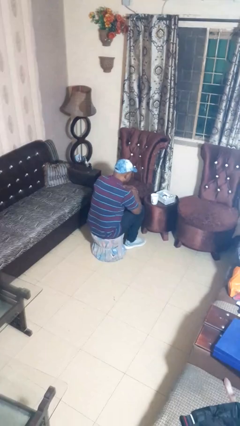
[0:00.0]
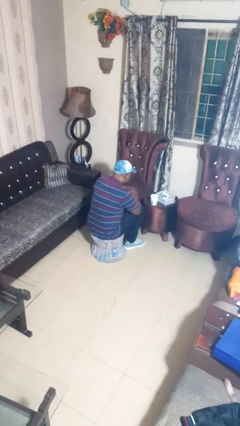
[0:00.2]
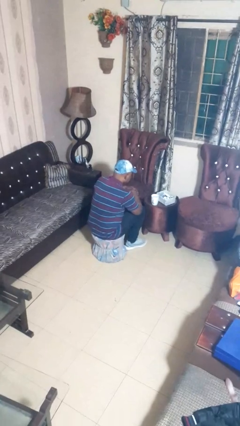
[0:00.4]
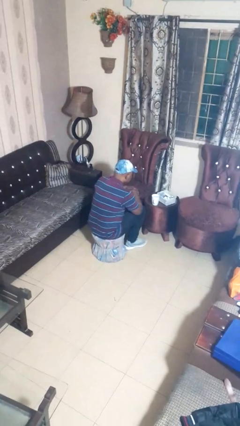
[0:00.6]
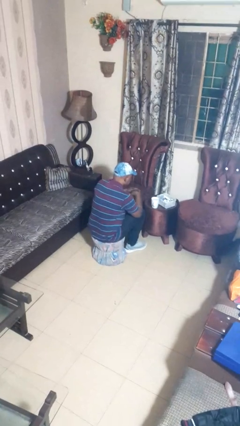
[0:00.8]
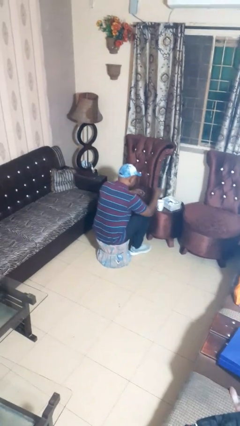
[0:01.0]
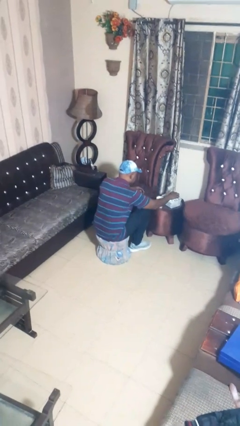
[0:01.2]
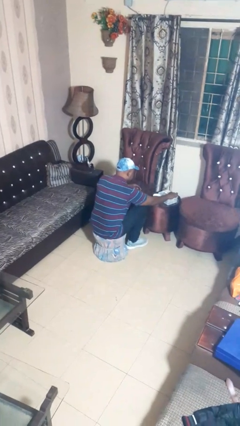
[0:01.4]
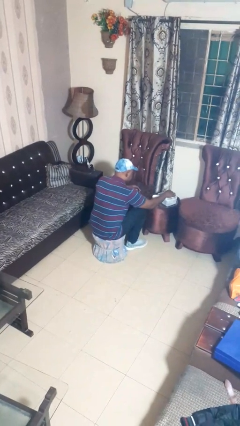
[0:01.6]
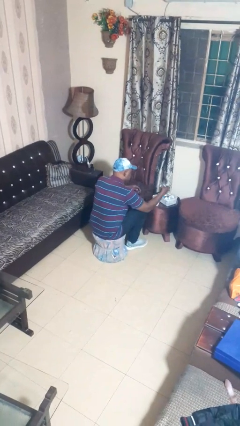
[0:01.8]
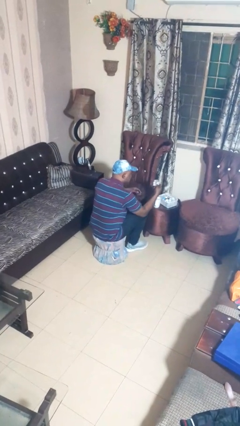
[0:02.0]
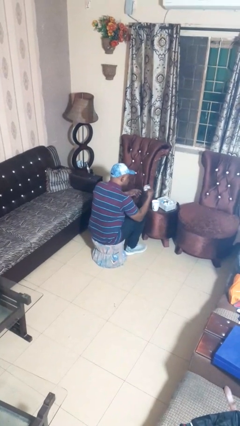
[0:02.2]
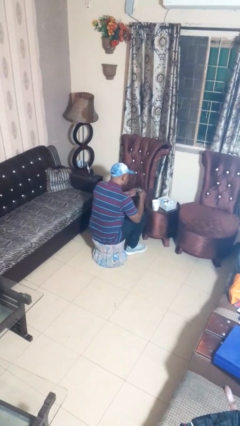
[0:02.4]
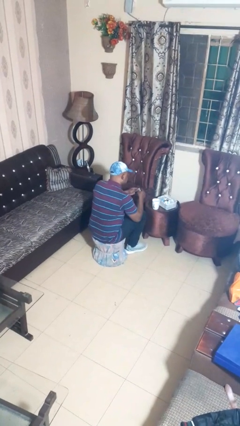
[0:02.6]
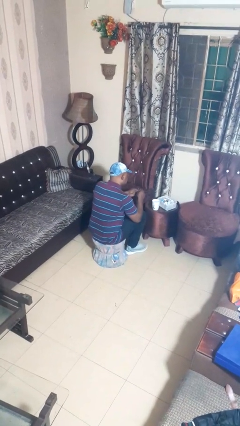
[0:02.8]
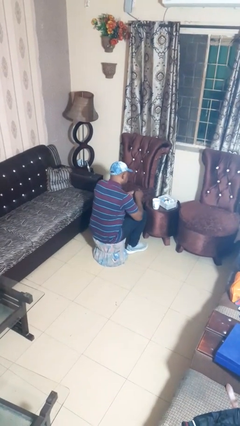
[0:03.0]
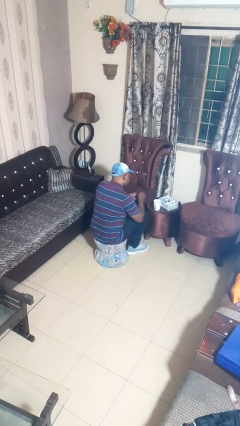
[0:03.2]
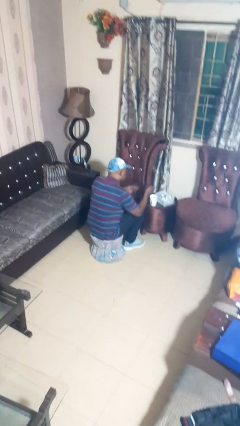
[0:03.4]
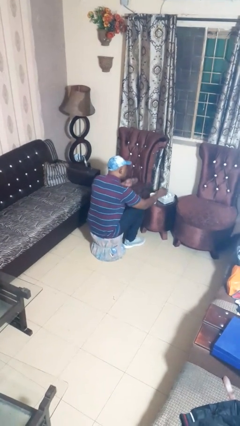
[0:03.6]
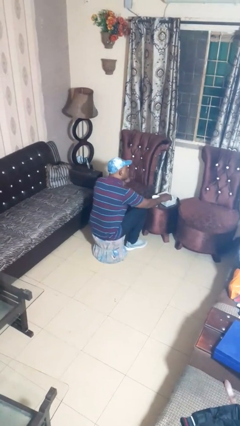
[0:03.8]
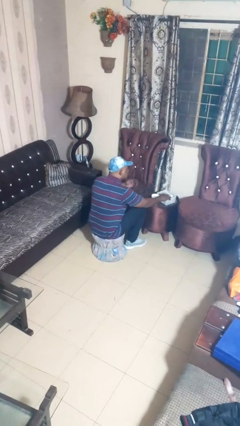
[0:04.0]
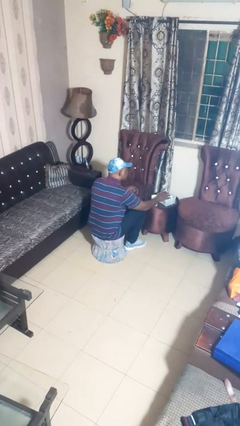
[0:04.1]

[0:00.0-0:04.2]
person takes medicine pills

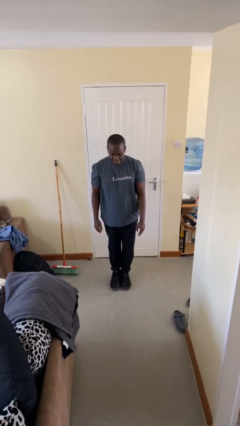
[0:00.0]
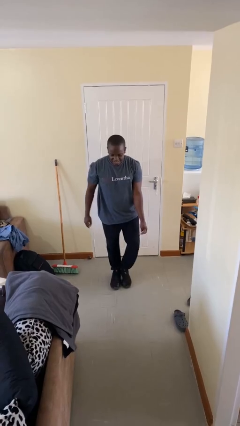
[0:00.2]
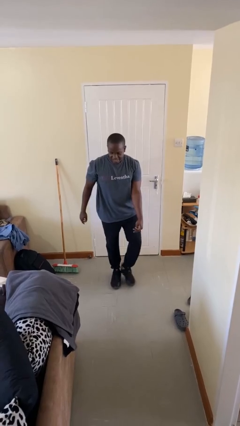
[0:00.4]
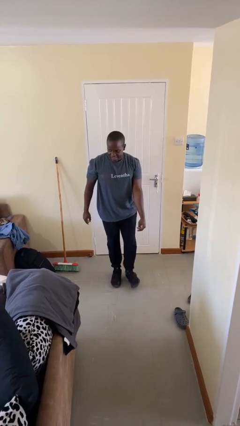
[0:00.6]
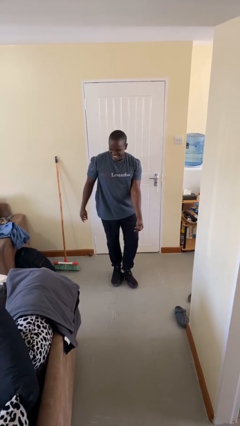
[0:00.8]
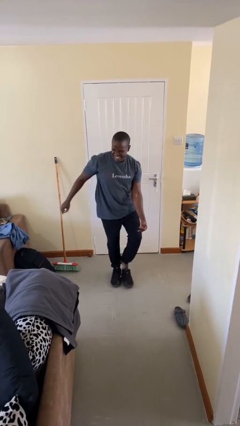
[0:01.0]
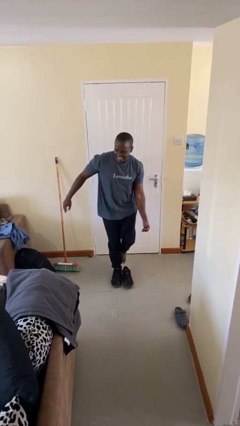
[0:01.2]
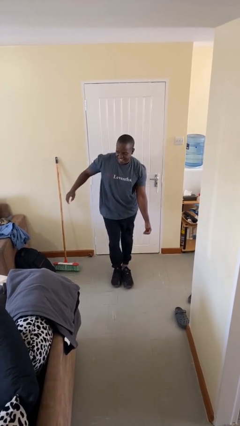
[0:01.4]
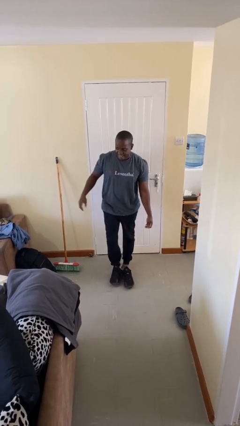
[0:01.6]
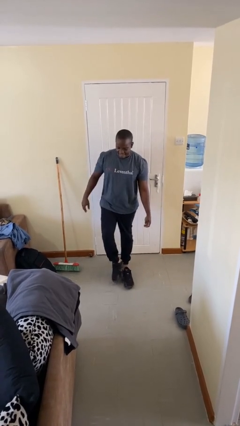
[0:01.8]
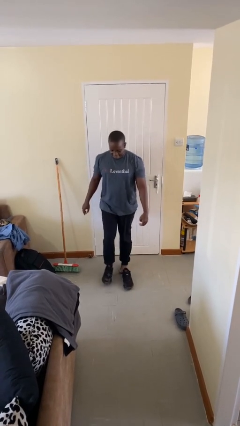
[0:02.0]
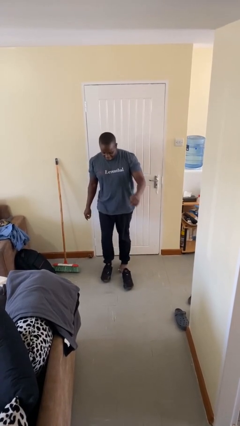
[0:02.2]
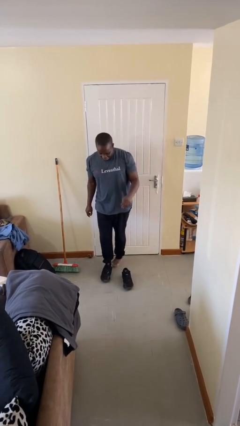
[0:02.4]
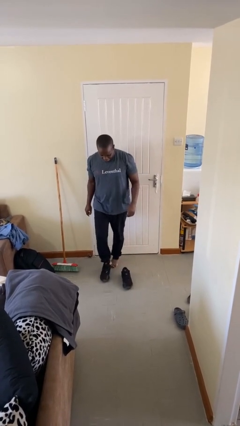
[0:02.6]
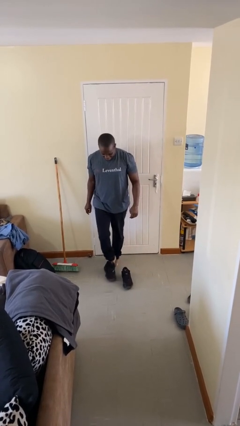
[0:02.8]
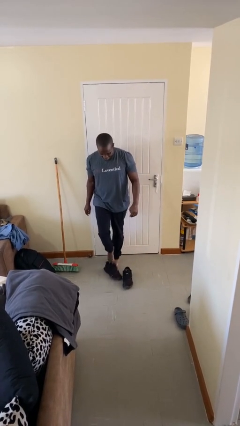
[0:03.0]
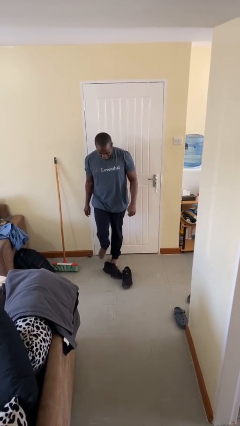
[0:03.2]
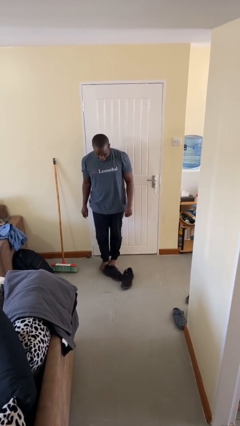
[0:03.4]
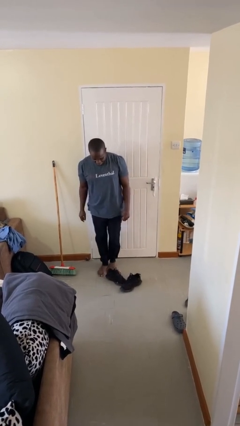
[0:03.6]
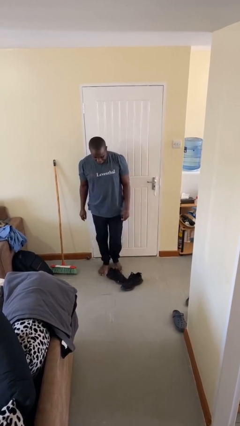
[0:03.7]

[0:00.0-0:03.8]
person takes off shoes

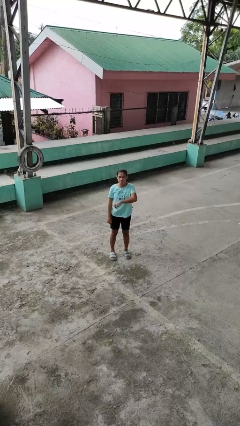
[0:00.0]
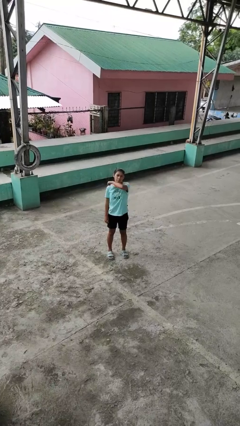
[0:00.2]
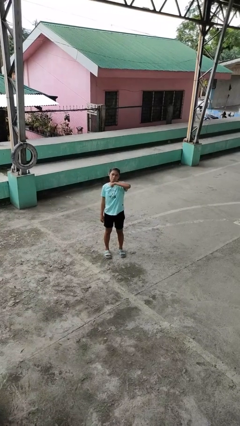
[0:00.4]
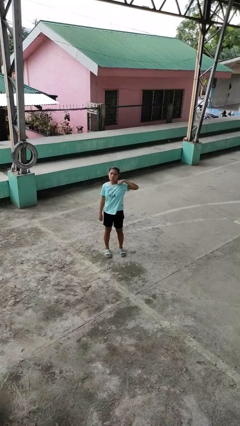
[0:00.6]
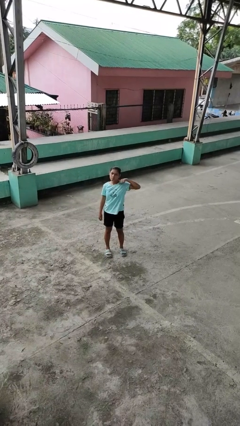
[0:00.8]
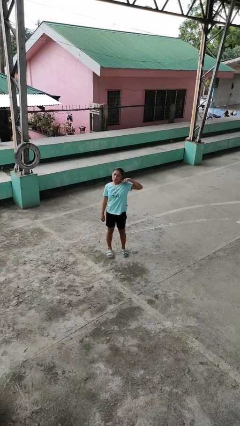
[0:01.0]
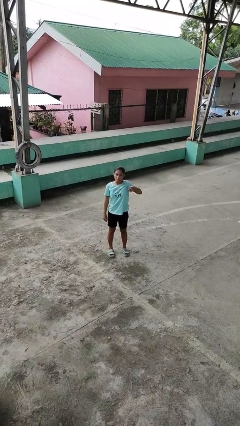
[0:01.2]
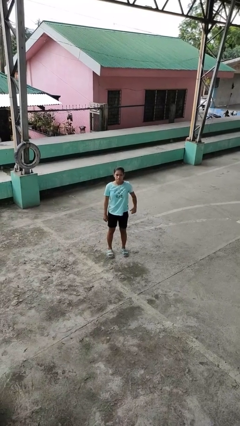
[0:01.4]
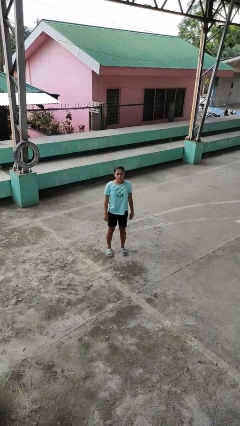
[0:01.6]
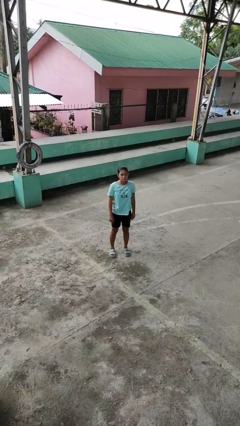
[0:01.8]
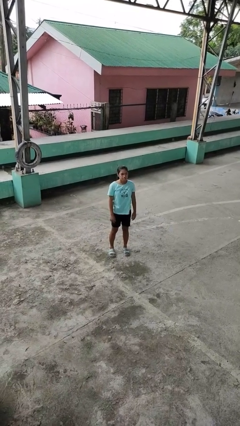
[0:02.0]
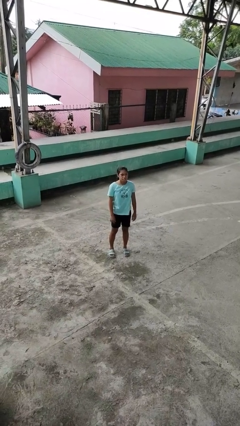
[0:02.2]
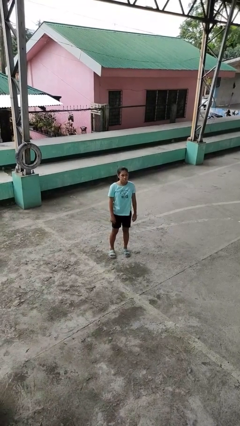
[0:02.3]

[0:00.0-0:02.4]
person gestures cut

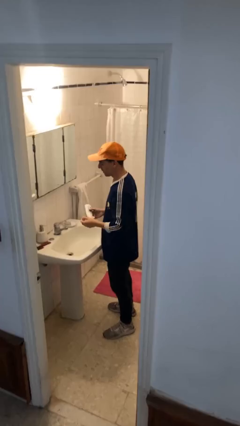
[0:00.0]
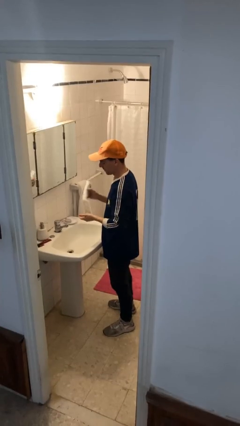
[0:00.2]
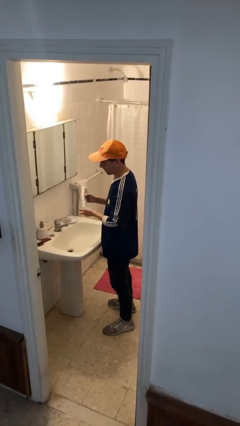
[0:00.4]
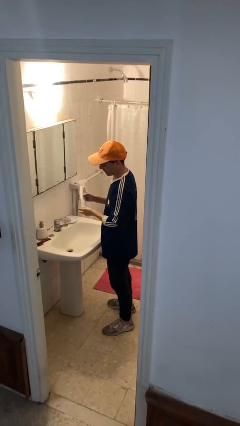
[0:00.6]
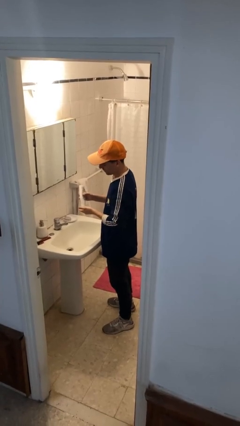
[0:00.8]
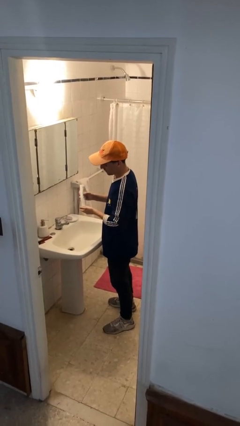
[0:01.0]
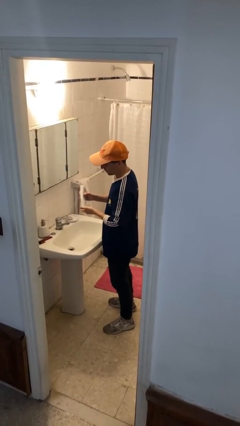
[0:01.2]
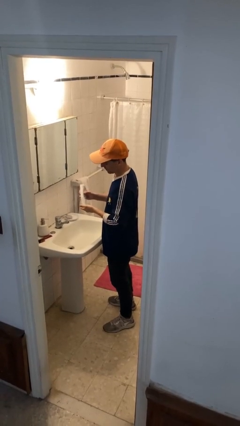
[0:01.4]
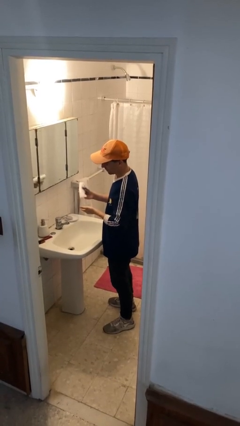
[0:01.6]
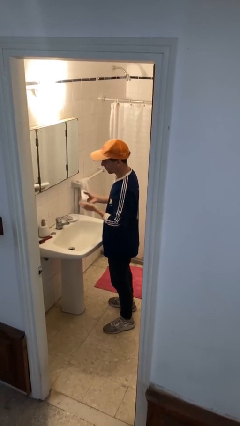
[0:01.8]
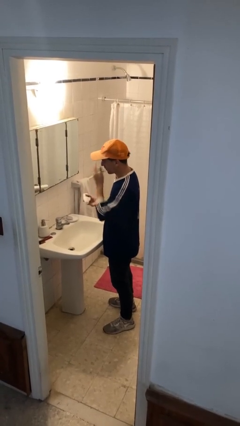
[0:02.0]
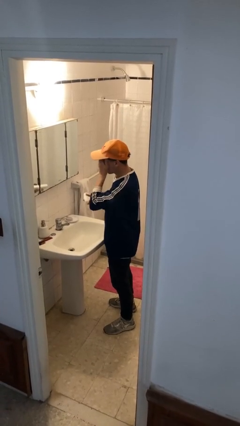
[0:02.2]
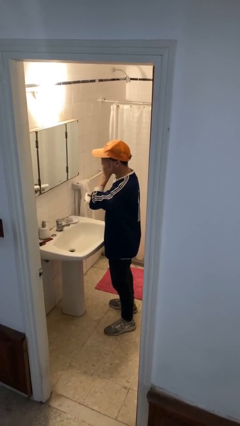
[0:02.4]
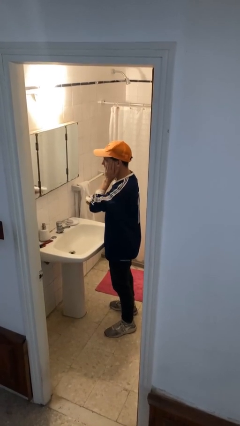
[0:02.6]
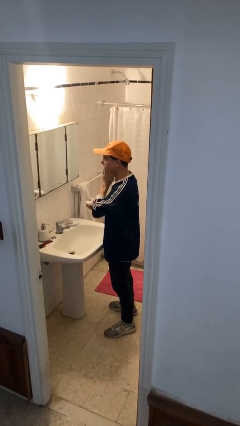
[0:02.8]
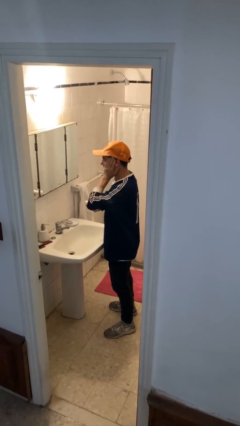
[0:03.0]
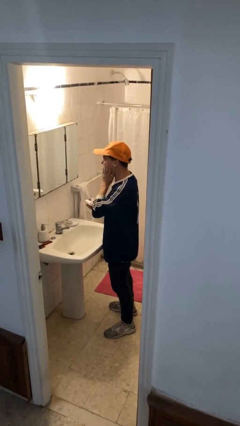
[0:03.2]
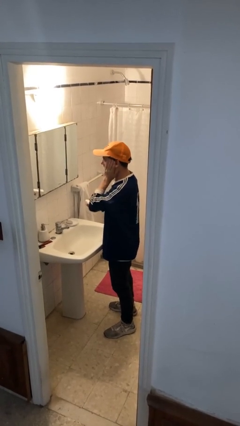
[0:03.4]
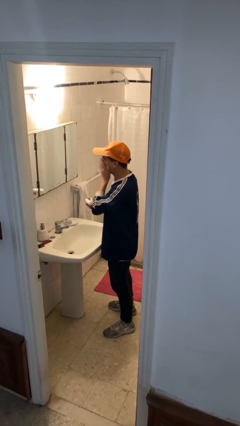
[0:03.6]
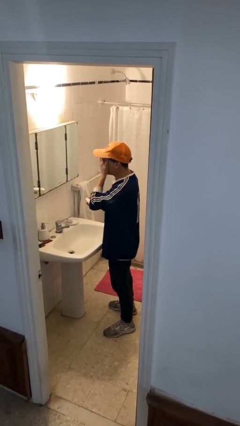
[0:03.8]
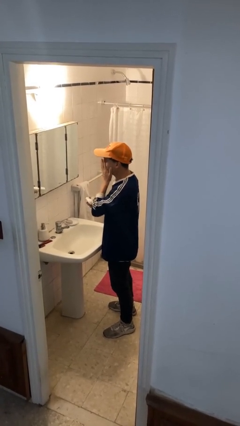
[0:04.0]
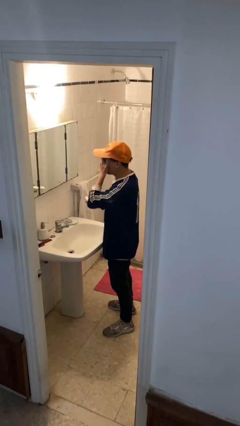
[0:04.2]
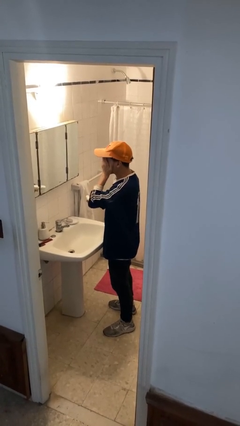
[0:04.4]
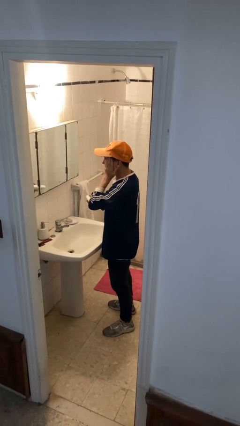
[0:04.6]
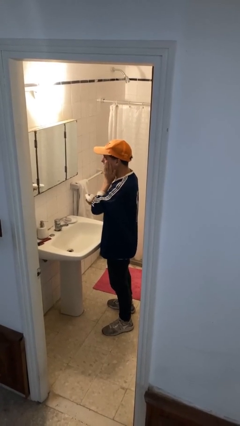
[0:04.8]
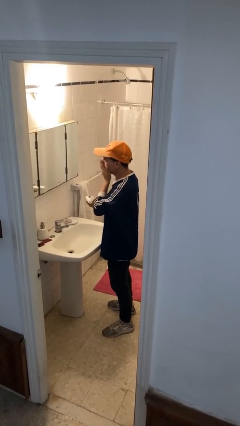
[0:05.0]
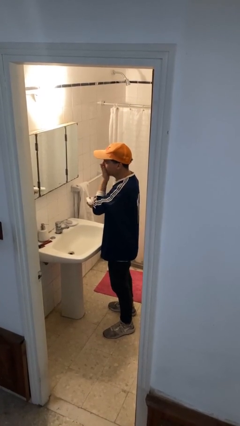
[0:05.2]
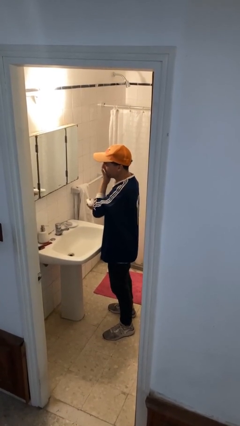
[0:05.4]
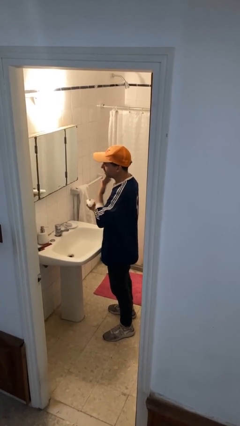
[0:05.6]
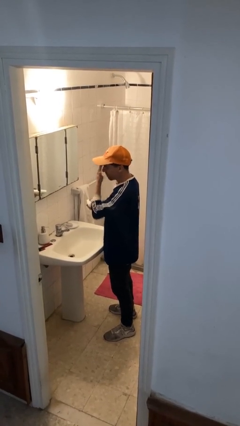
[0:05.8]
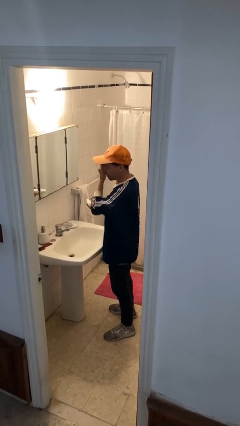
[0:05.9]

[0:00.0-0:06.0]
person applies facial moisturizer

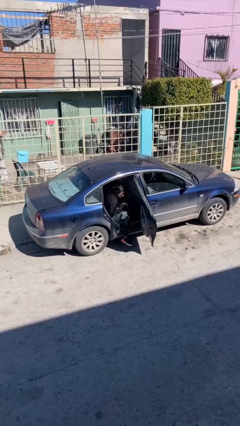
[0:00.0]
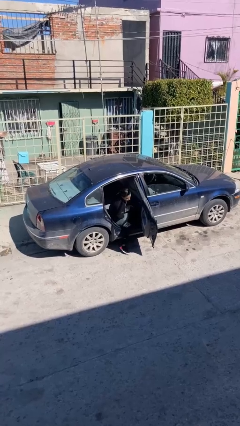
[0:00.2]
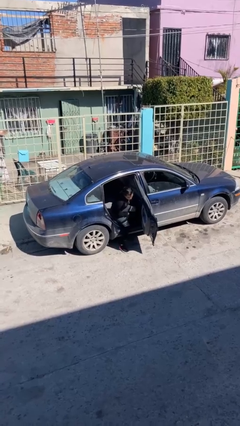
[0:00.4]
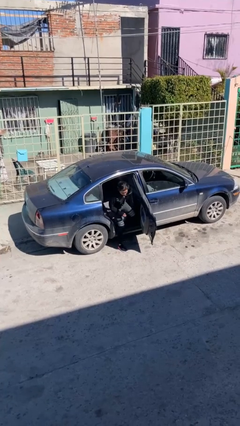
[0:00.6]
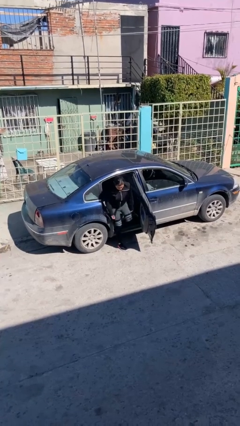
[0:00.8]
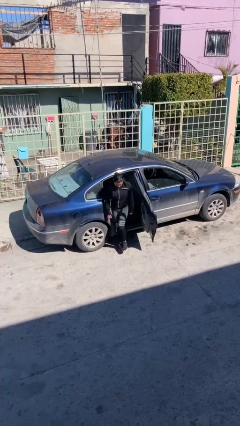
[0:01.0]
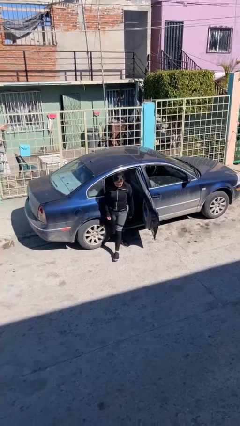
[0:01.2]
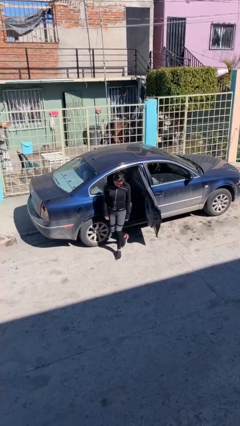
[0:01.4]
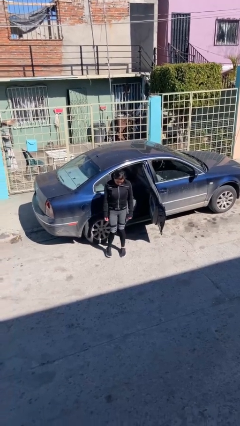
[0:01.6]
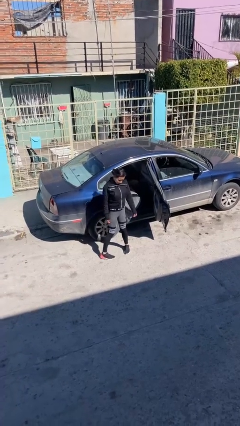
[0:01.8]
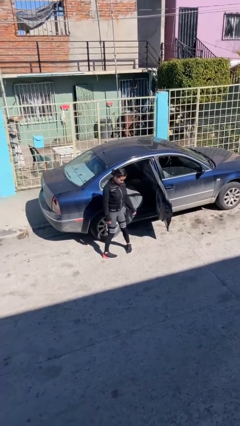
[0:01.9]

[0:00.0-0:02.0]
person exits car
